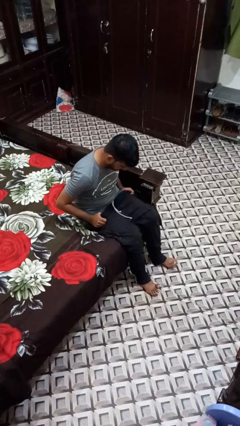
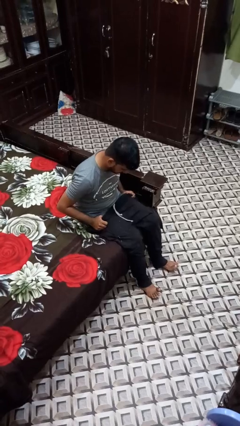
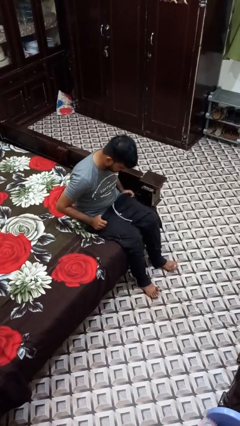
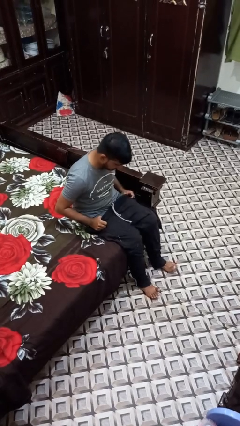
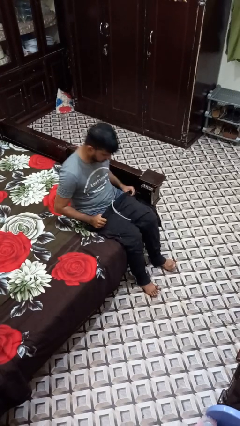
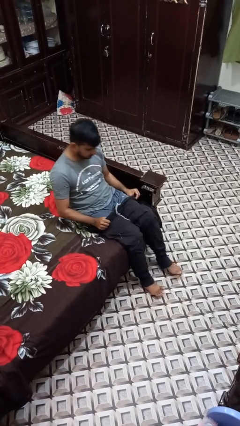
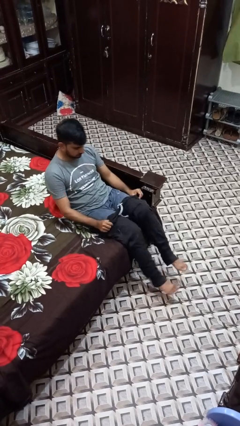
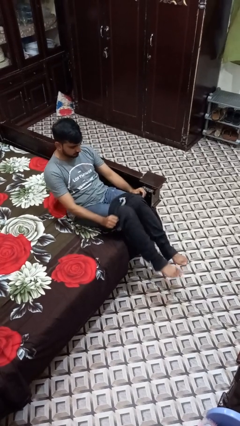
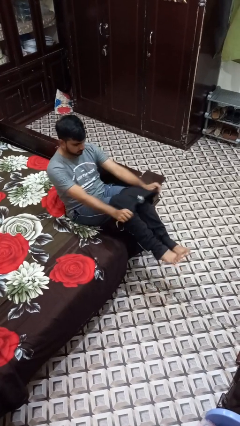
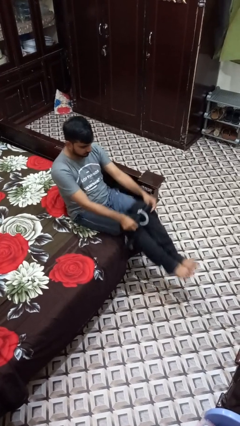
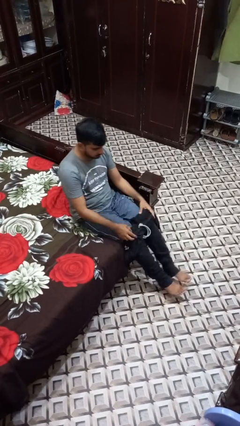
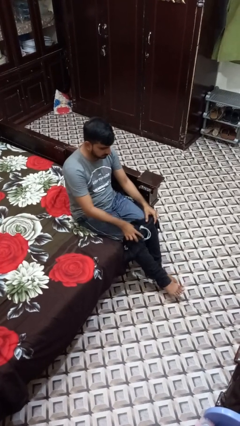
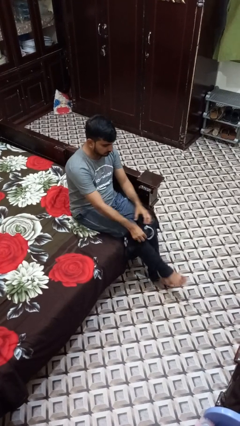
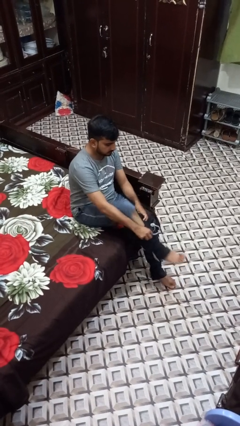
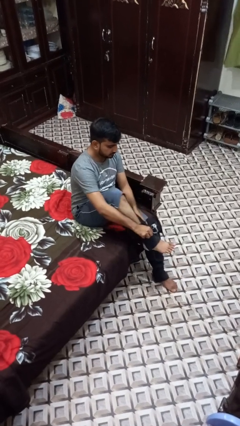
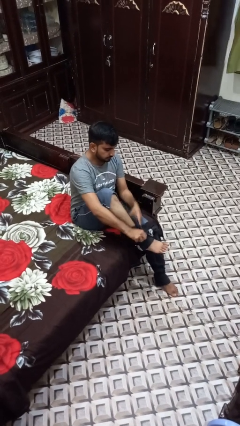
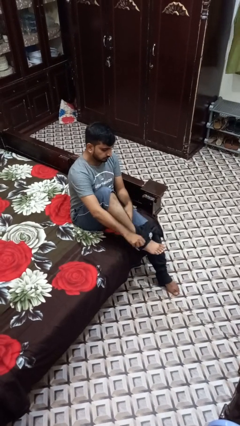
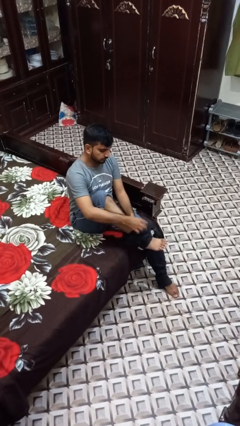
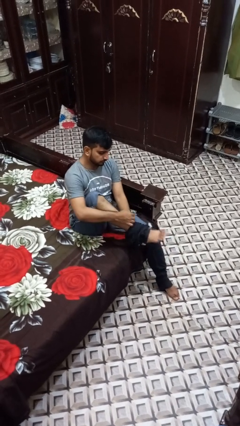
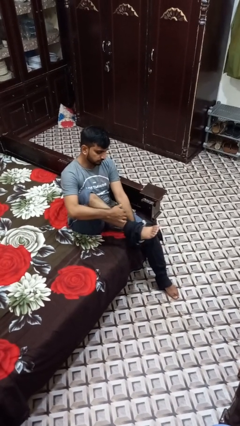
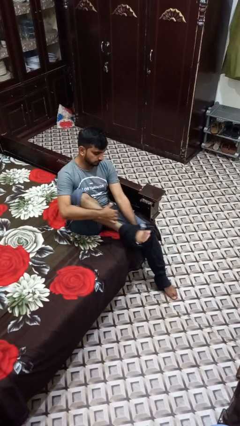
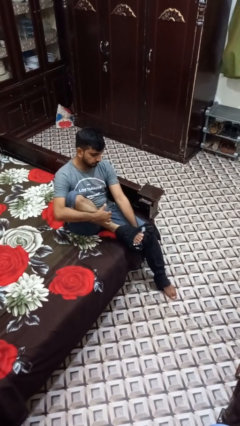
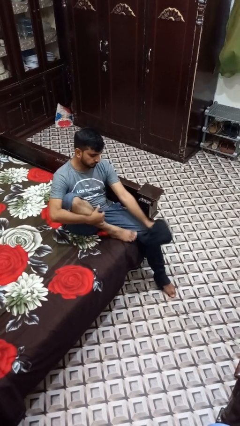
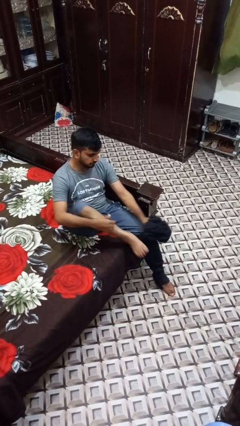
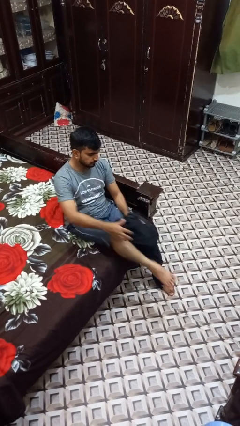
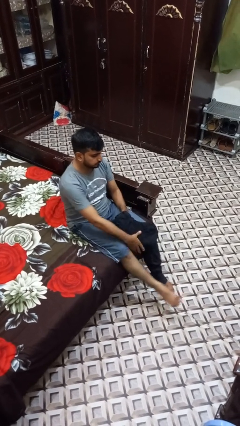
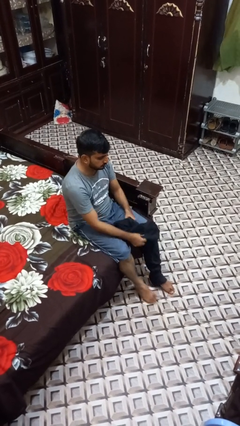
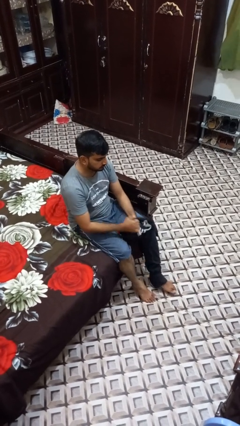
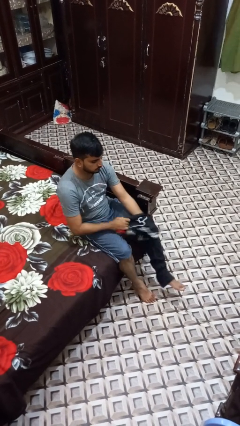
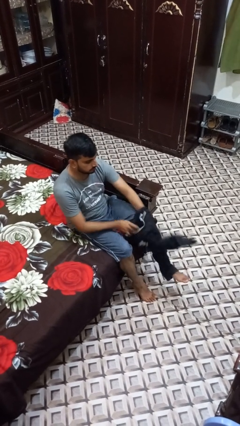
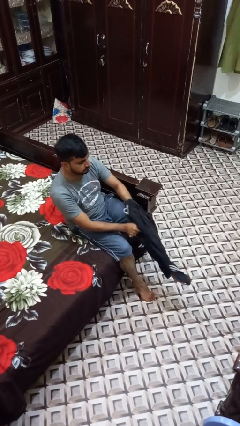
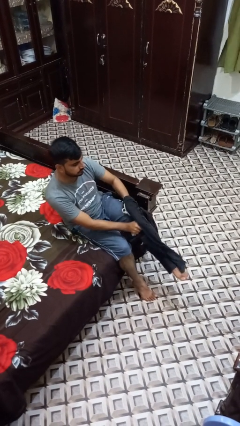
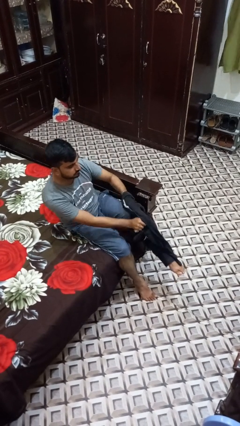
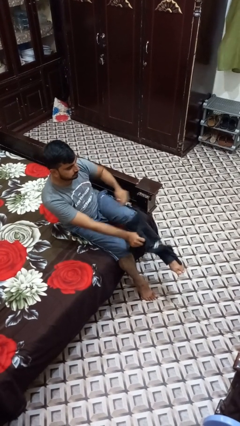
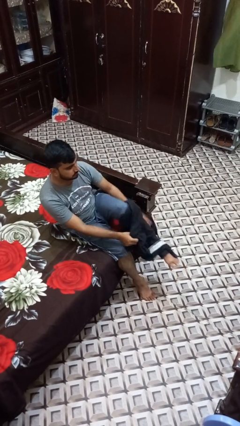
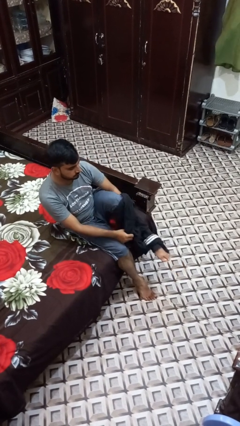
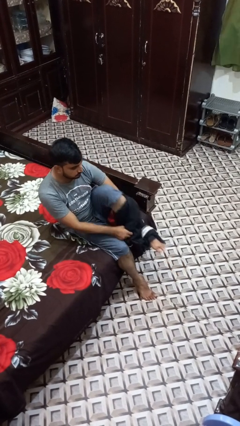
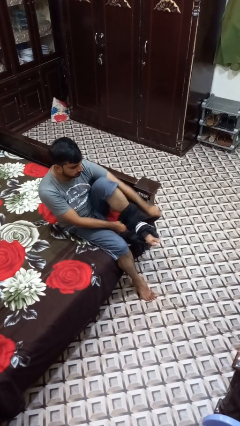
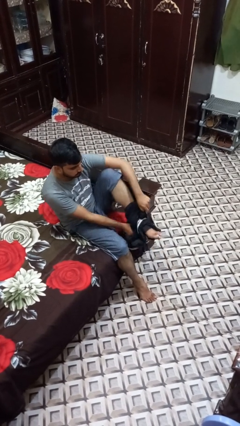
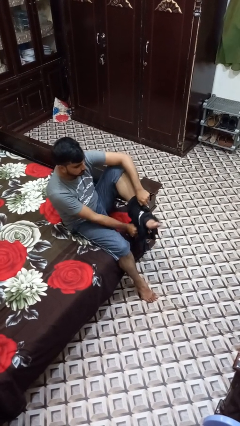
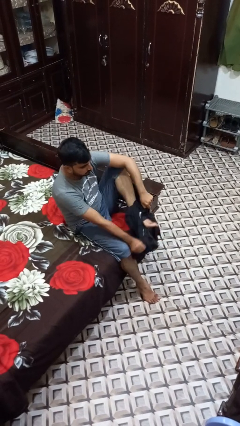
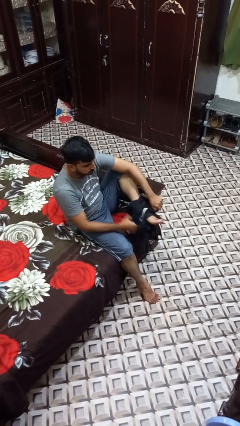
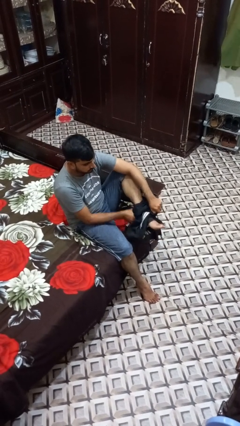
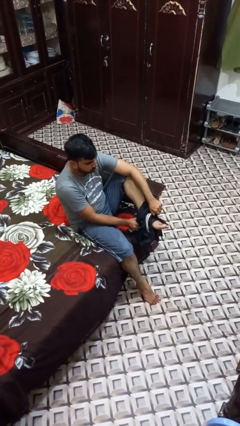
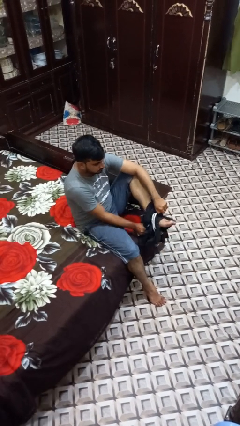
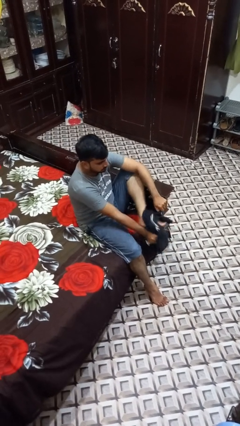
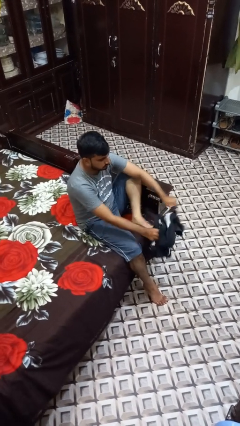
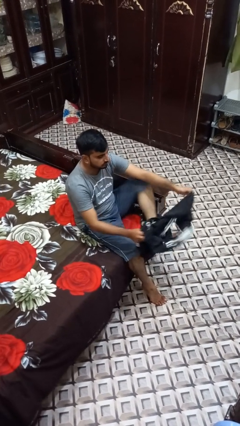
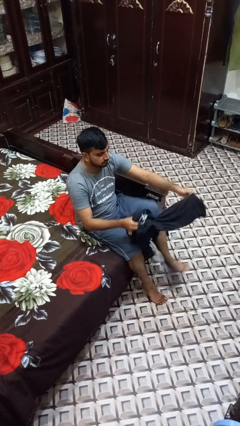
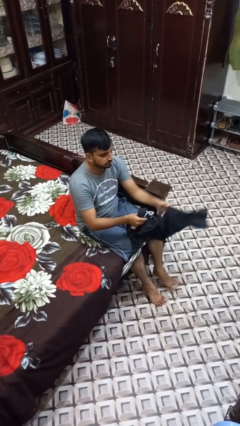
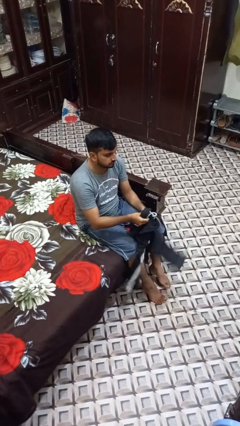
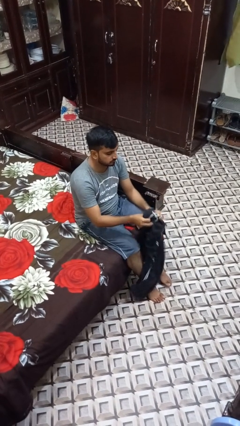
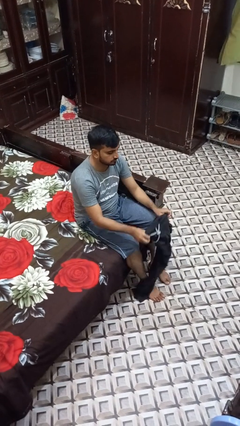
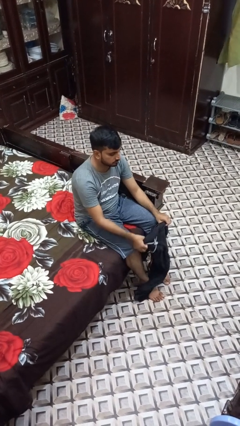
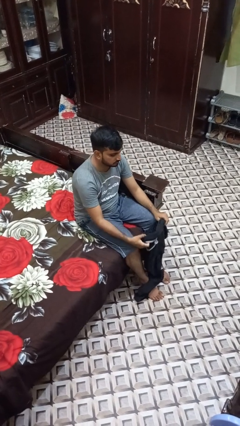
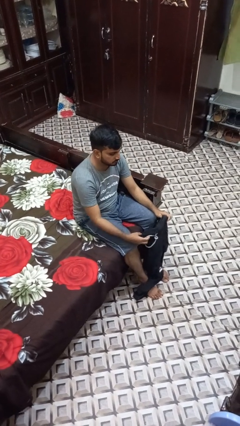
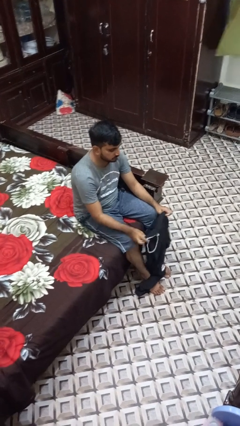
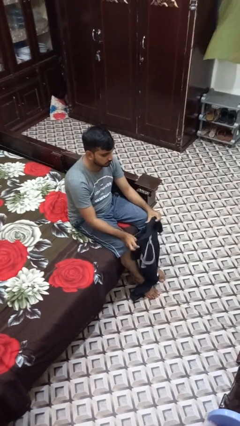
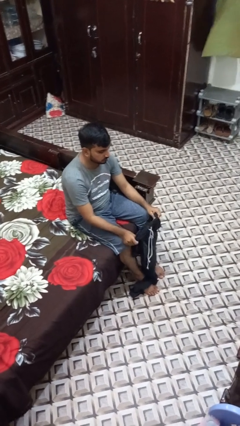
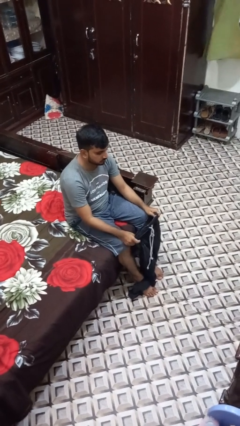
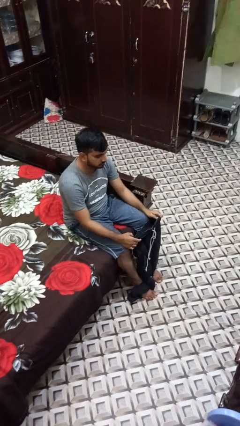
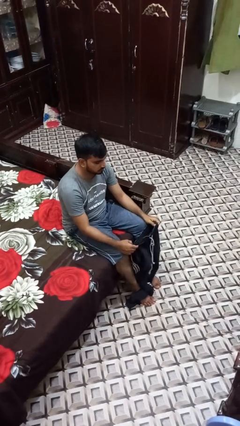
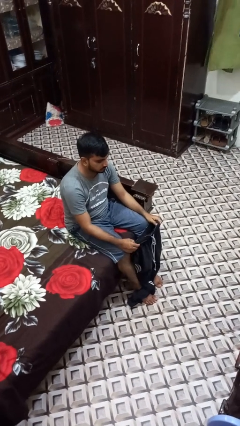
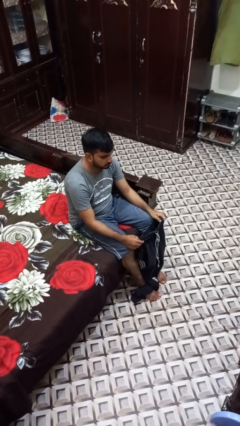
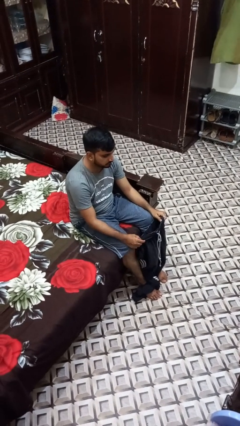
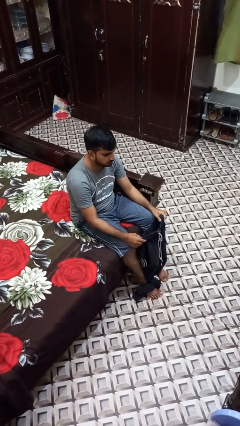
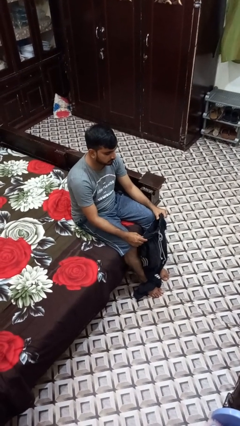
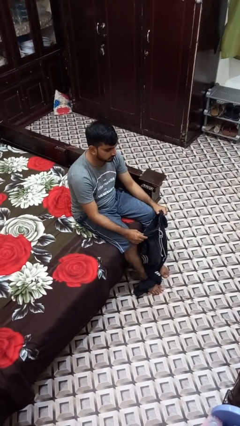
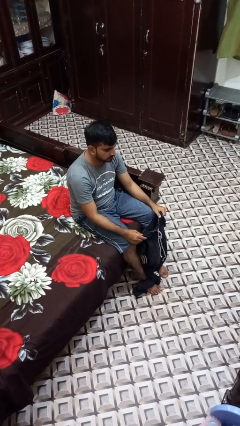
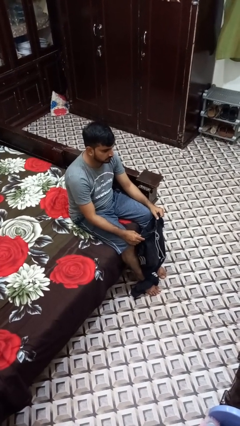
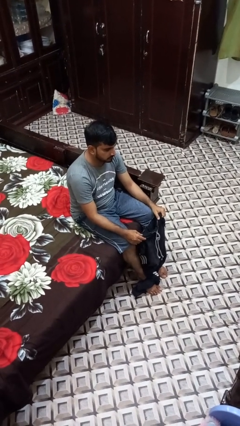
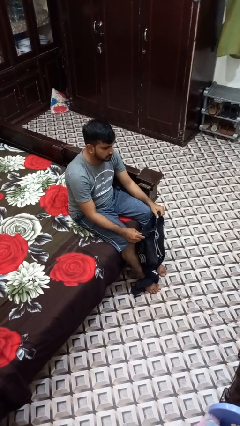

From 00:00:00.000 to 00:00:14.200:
person takes off pants

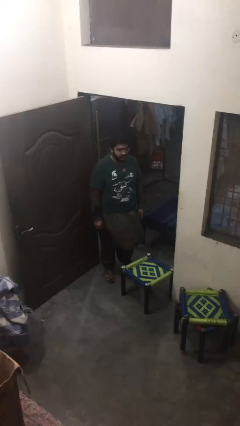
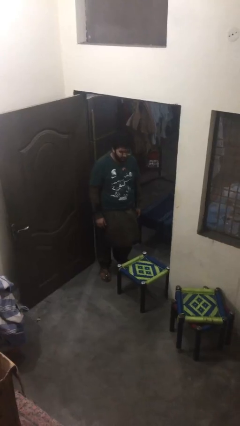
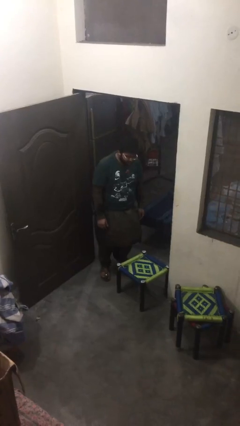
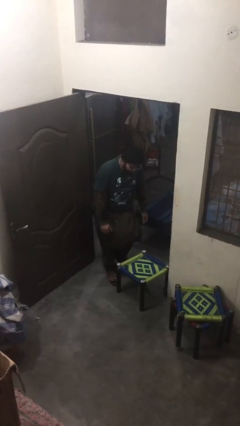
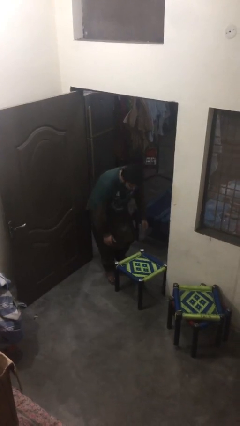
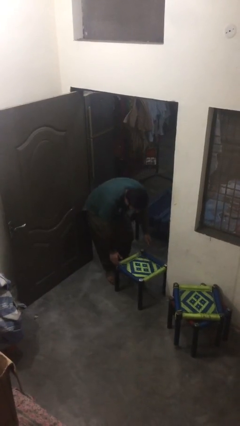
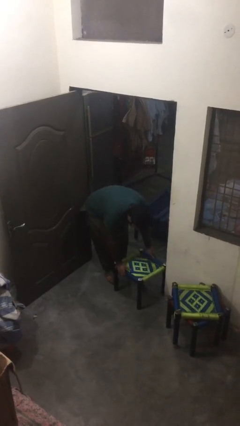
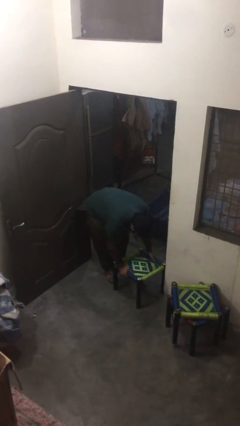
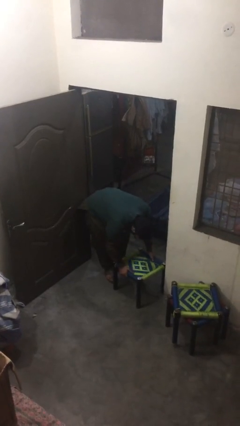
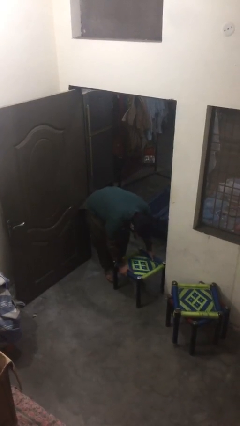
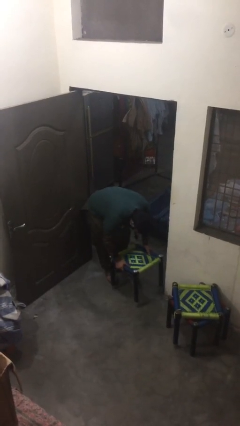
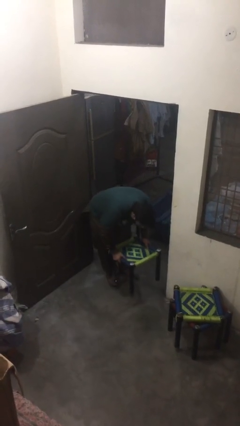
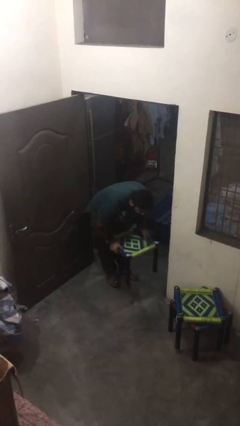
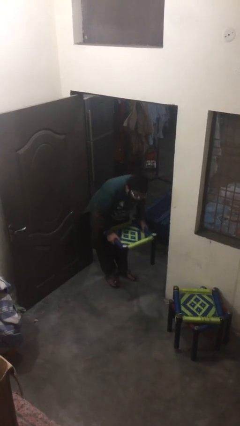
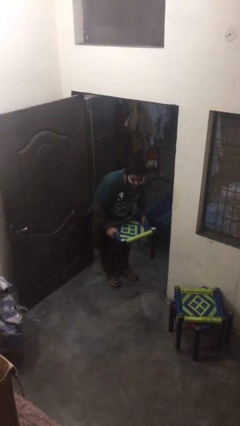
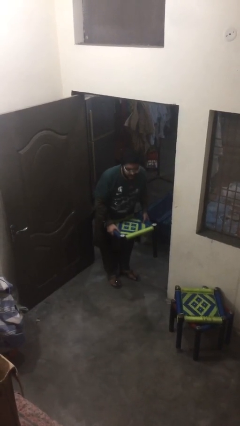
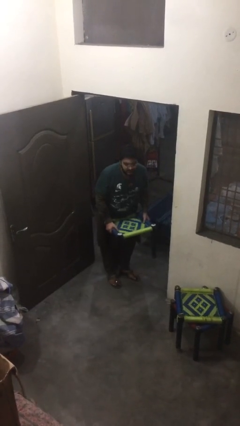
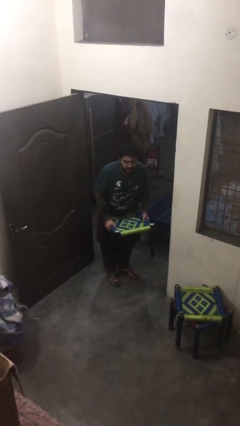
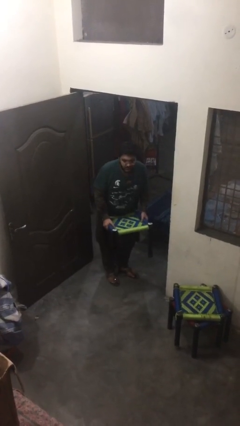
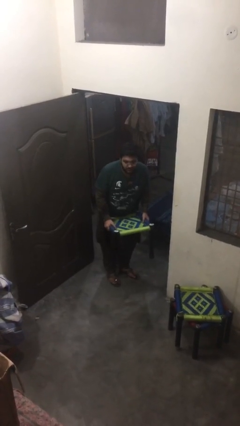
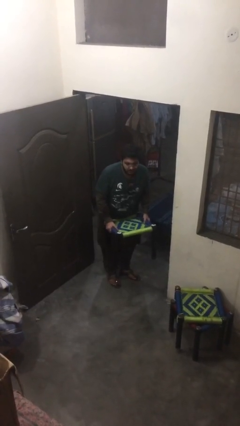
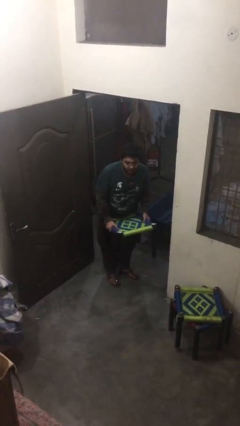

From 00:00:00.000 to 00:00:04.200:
person picks up object from floor
